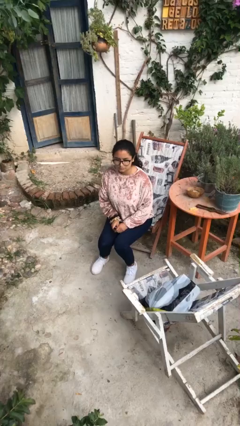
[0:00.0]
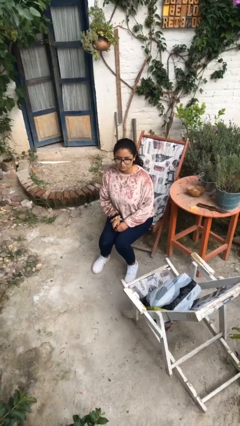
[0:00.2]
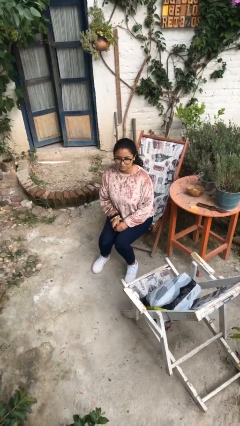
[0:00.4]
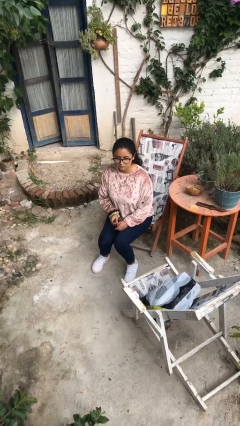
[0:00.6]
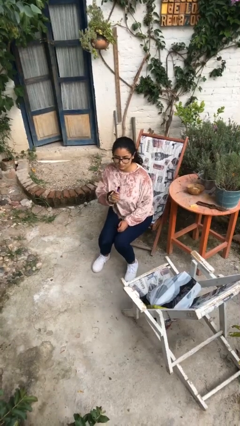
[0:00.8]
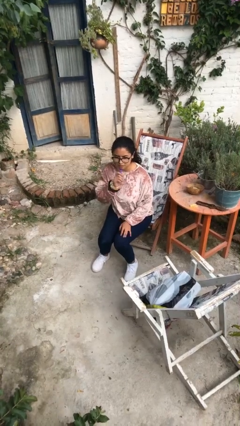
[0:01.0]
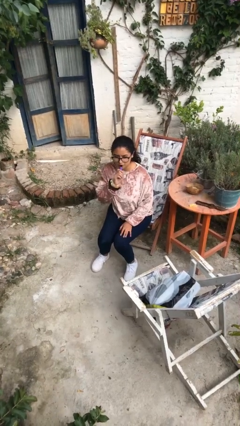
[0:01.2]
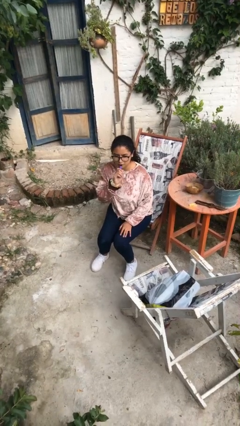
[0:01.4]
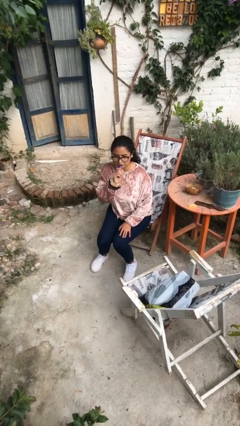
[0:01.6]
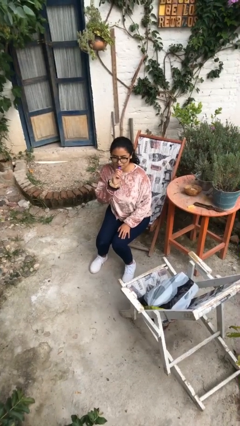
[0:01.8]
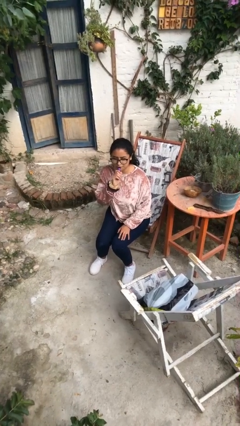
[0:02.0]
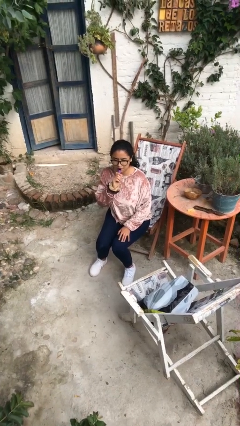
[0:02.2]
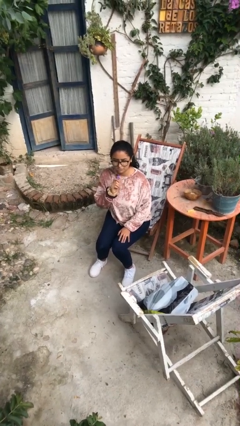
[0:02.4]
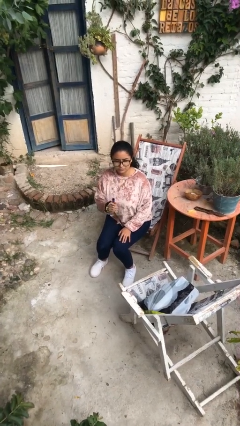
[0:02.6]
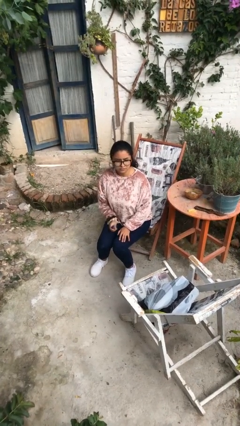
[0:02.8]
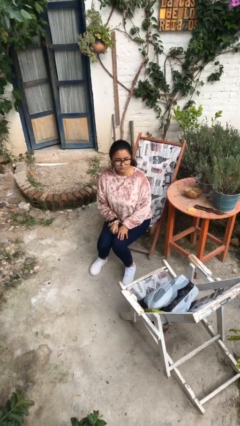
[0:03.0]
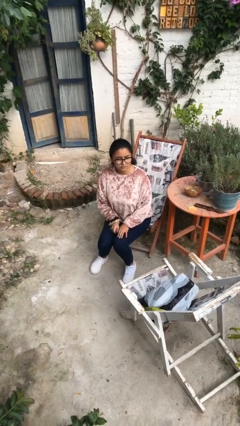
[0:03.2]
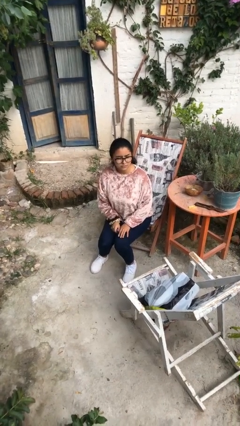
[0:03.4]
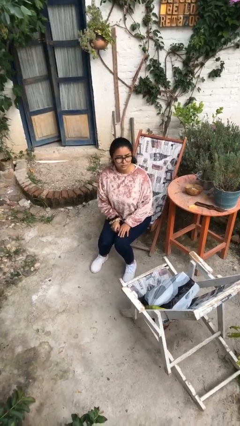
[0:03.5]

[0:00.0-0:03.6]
person vapes

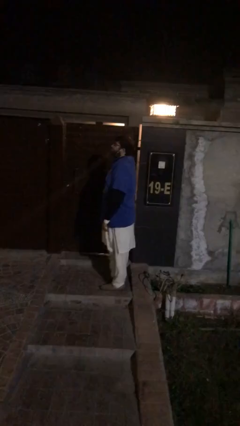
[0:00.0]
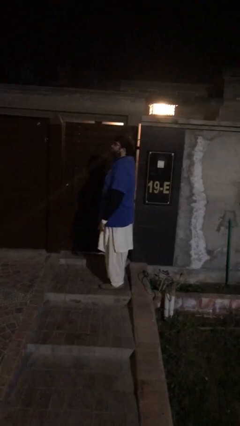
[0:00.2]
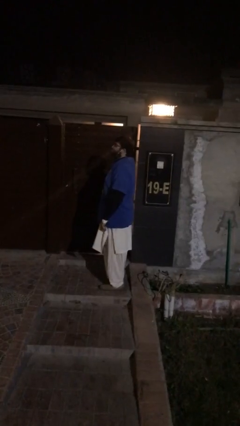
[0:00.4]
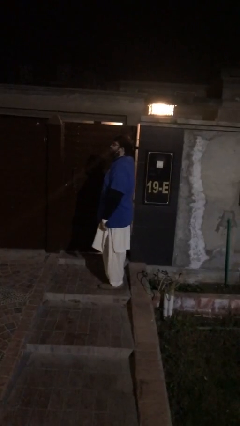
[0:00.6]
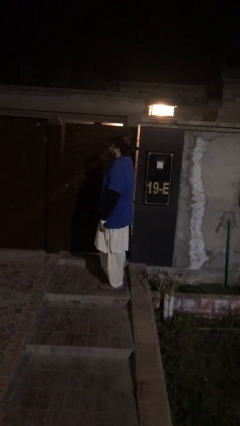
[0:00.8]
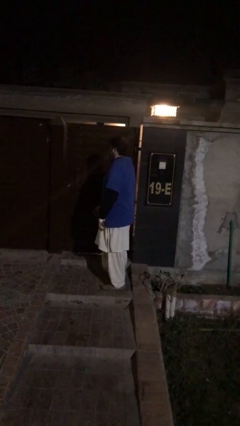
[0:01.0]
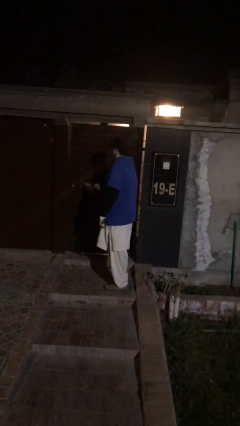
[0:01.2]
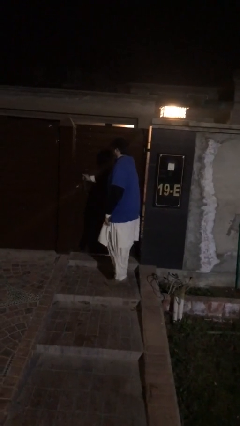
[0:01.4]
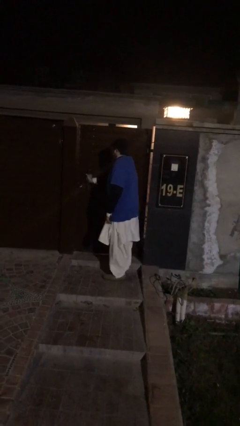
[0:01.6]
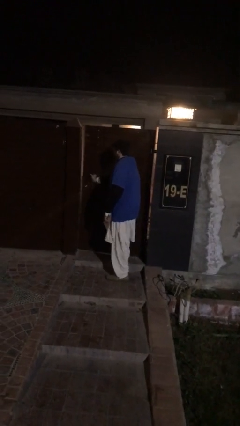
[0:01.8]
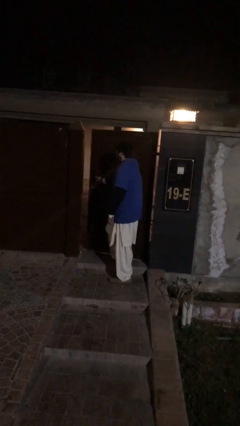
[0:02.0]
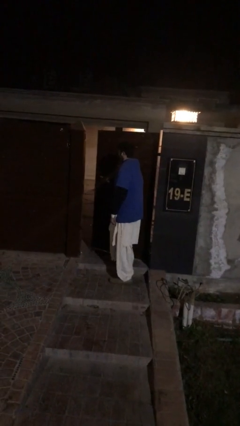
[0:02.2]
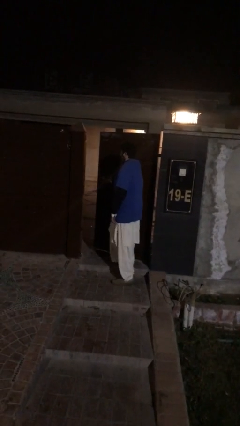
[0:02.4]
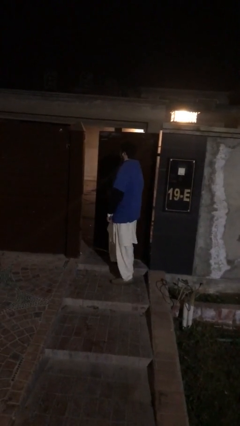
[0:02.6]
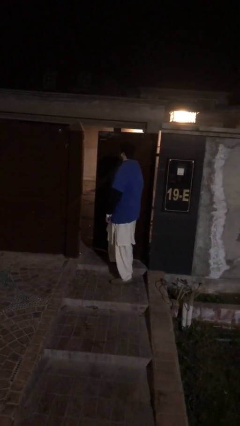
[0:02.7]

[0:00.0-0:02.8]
person opens facility door

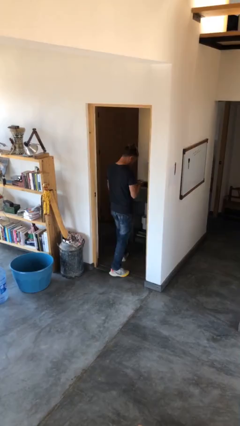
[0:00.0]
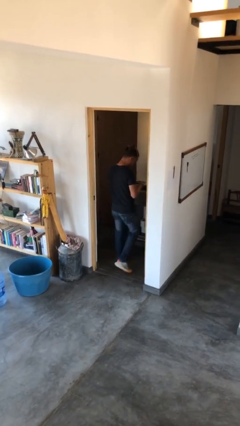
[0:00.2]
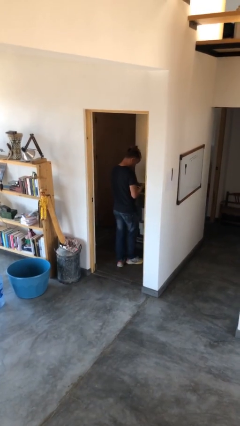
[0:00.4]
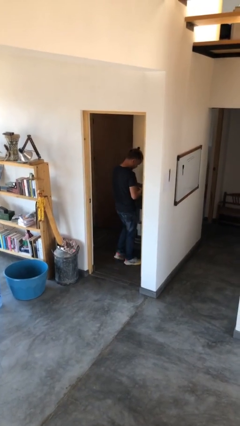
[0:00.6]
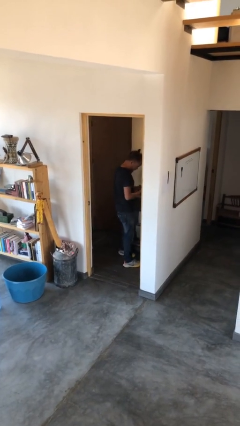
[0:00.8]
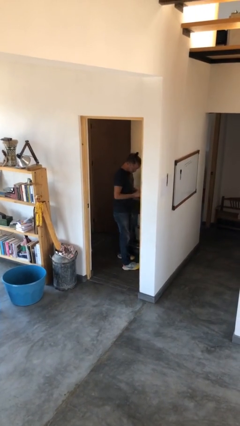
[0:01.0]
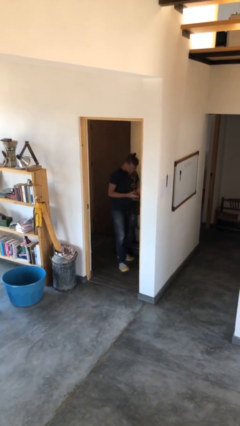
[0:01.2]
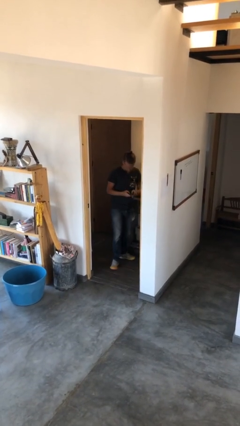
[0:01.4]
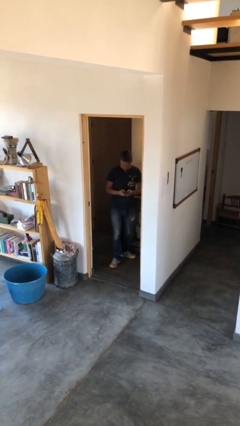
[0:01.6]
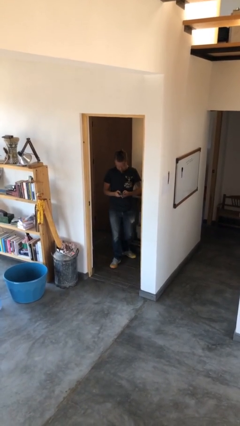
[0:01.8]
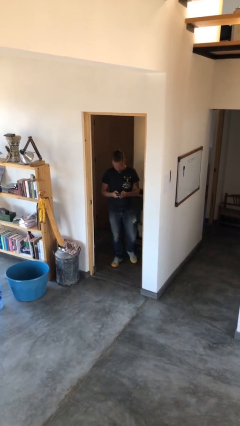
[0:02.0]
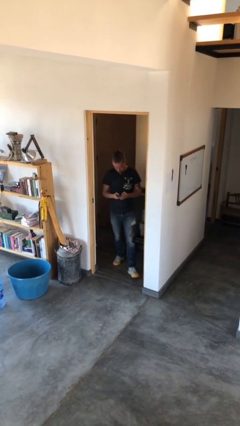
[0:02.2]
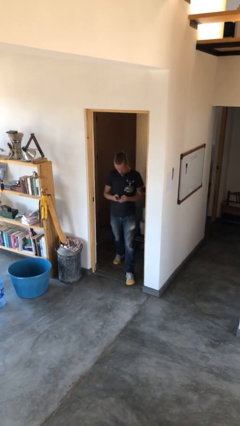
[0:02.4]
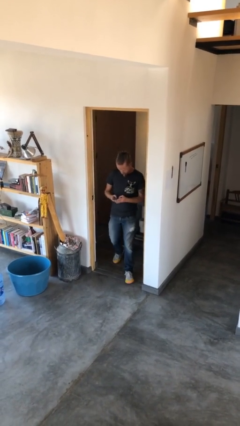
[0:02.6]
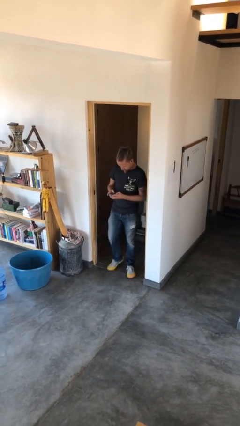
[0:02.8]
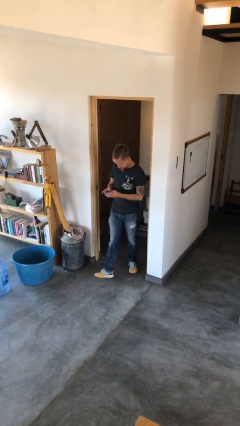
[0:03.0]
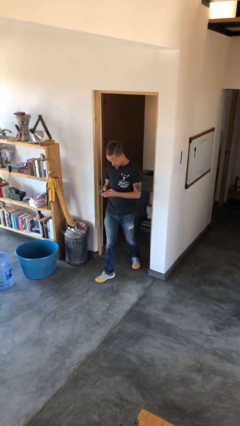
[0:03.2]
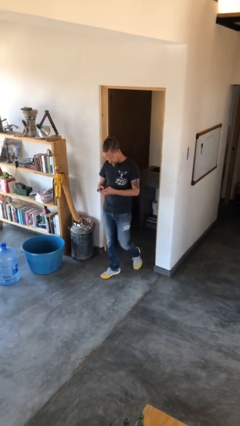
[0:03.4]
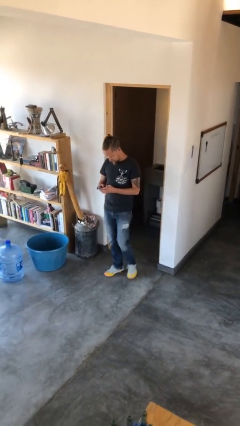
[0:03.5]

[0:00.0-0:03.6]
person enters scene through structure

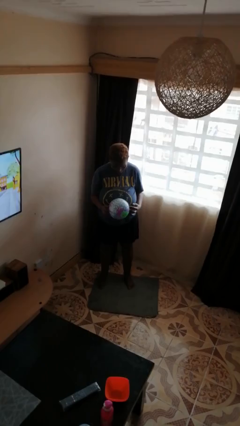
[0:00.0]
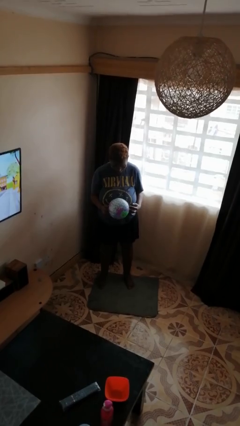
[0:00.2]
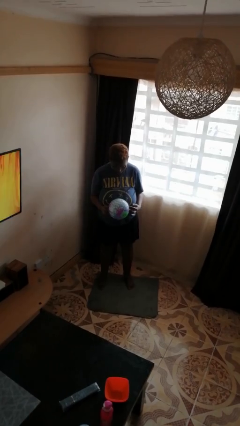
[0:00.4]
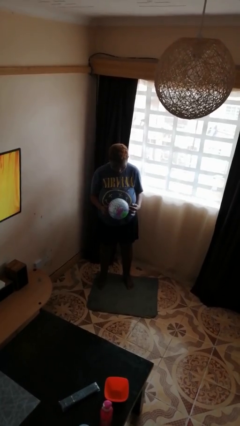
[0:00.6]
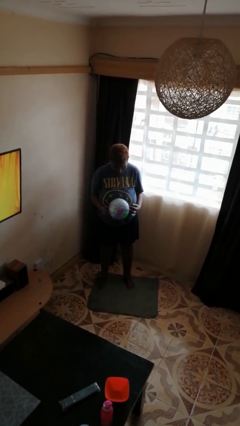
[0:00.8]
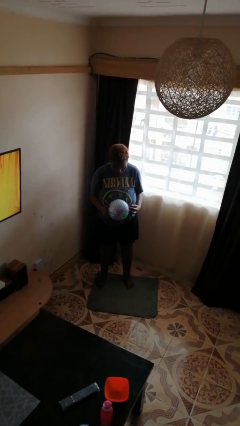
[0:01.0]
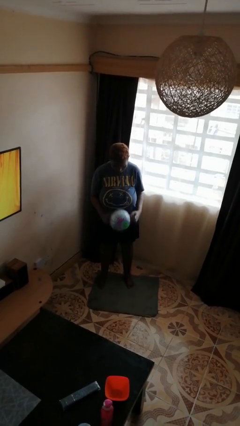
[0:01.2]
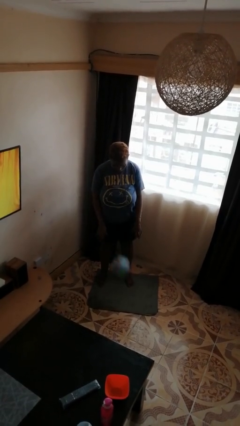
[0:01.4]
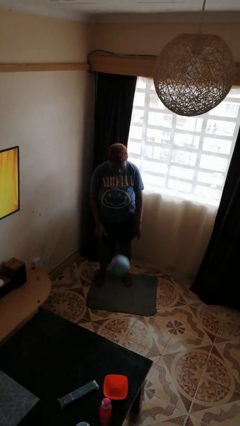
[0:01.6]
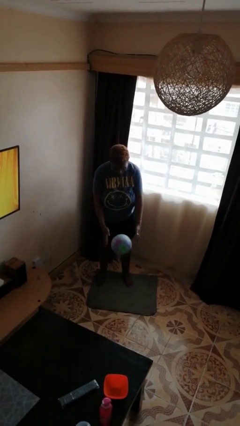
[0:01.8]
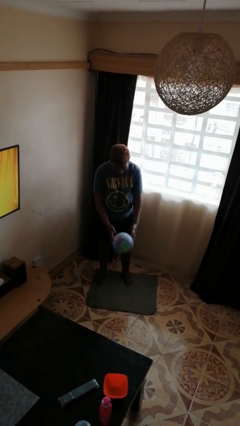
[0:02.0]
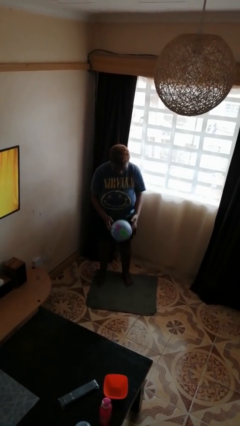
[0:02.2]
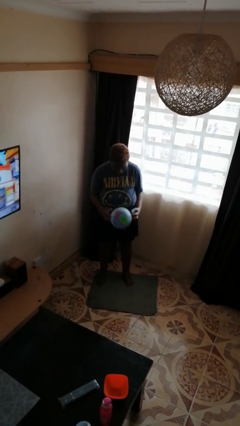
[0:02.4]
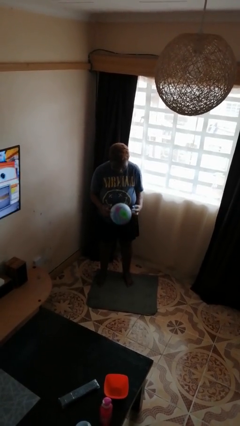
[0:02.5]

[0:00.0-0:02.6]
person bounces ball on floor

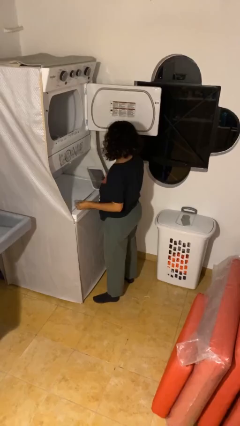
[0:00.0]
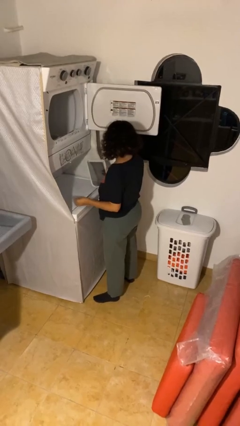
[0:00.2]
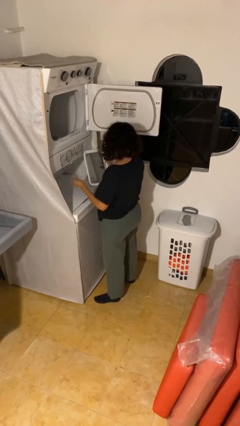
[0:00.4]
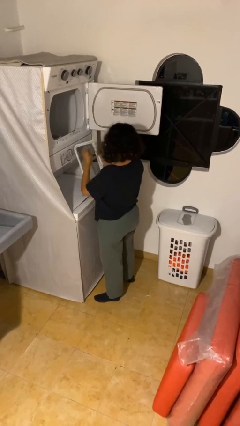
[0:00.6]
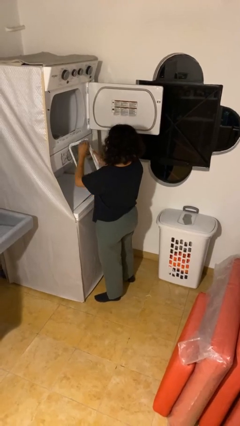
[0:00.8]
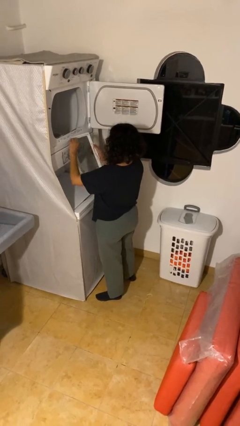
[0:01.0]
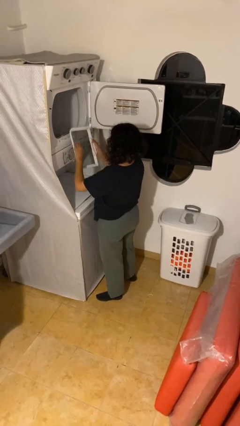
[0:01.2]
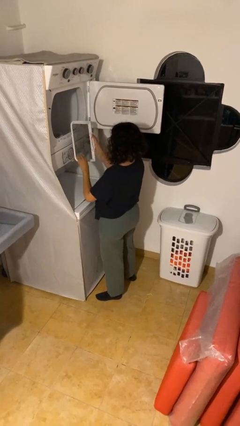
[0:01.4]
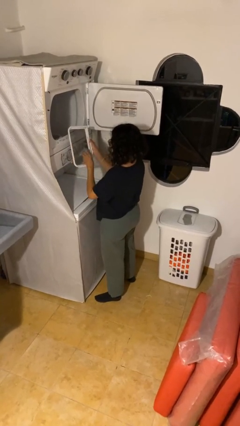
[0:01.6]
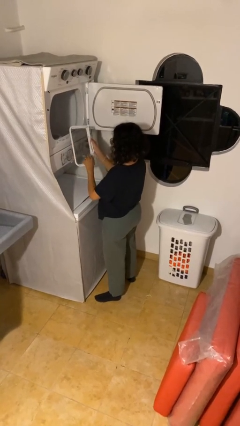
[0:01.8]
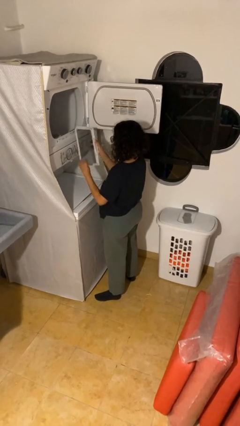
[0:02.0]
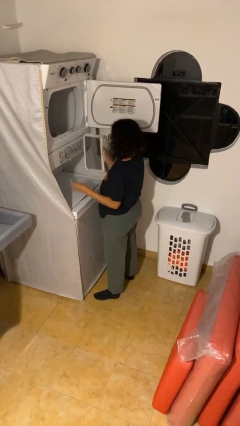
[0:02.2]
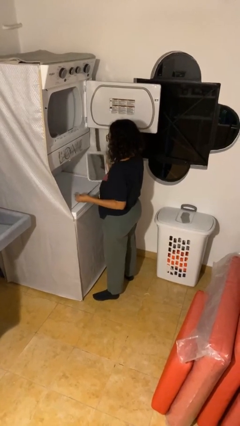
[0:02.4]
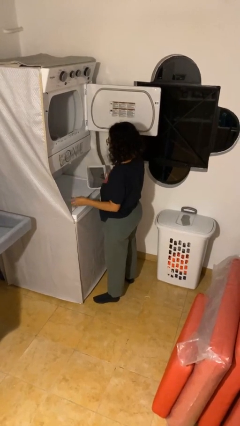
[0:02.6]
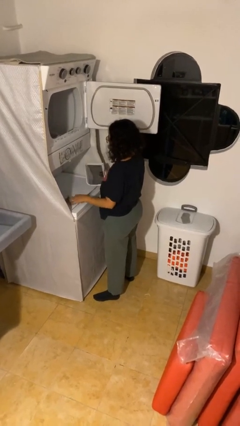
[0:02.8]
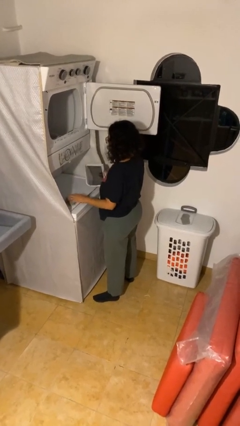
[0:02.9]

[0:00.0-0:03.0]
person cleans dryer lint trap

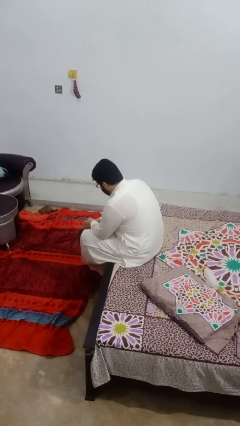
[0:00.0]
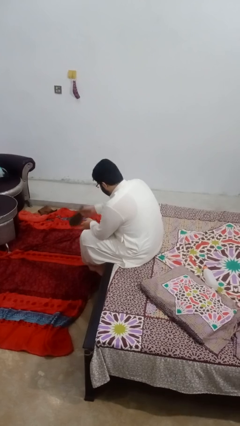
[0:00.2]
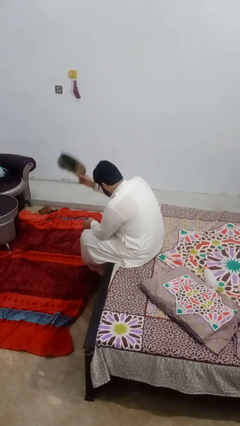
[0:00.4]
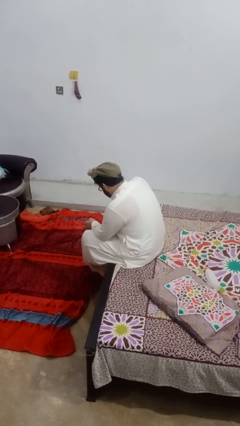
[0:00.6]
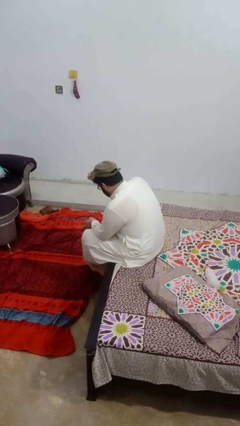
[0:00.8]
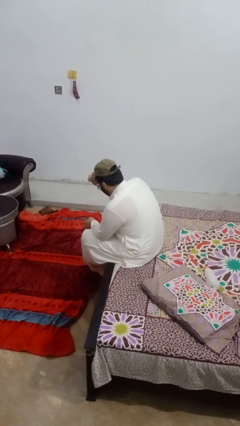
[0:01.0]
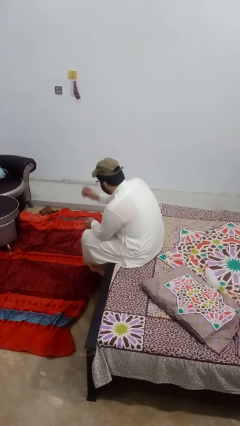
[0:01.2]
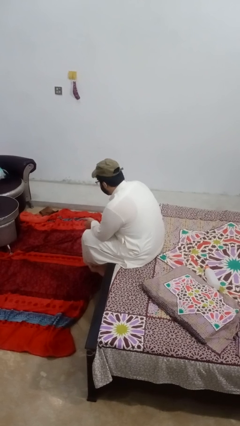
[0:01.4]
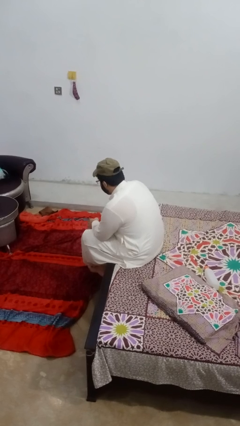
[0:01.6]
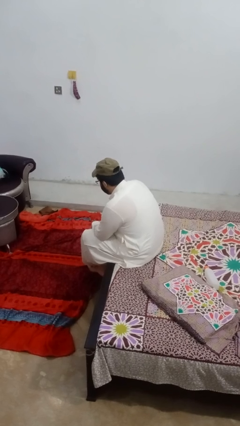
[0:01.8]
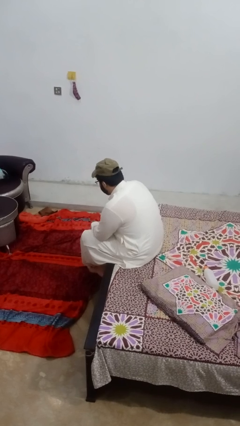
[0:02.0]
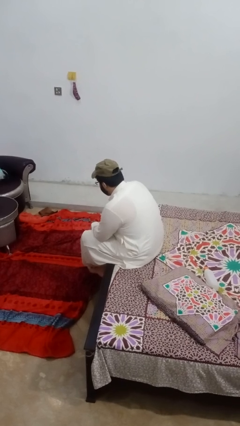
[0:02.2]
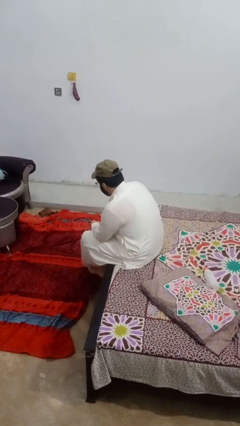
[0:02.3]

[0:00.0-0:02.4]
person puts on hat
